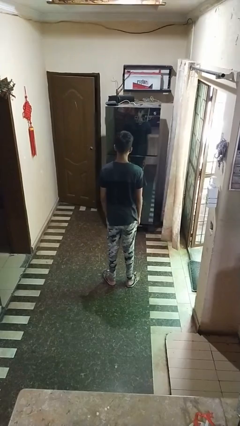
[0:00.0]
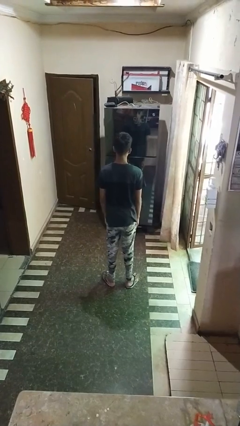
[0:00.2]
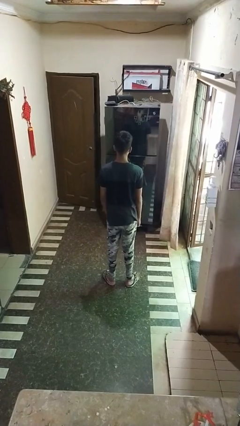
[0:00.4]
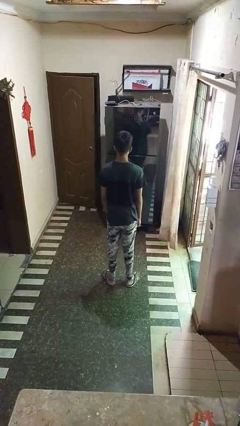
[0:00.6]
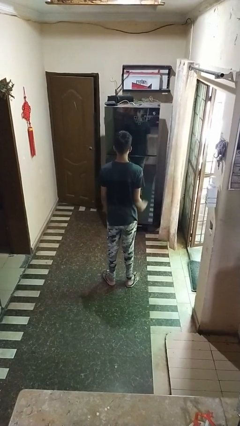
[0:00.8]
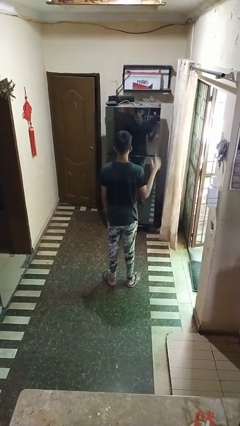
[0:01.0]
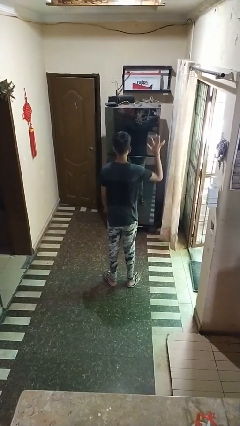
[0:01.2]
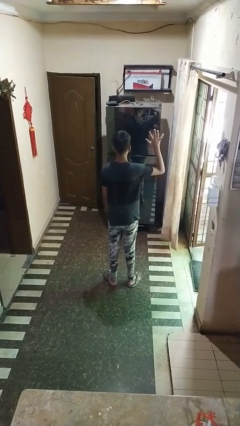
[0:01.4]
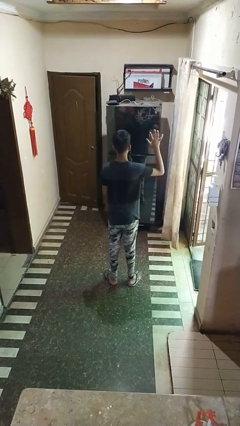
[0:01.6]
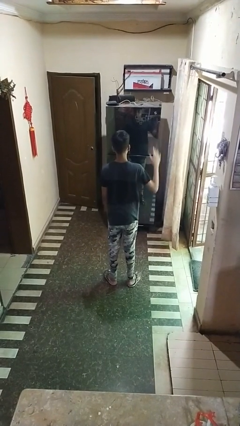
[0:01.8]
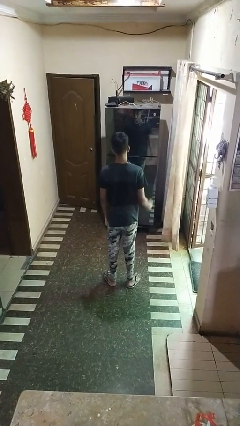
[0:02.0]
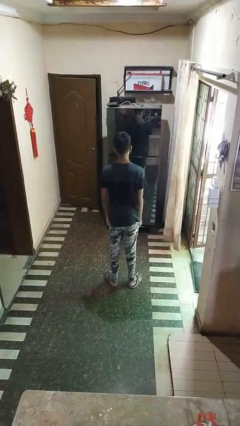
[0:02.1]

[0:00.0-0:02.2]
person gestures number five

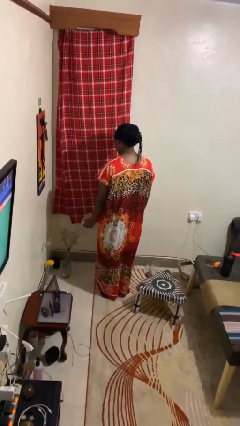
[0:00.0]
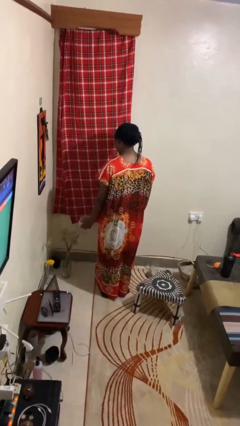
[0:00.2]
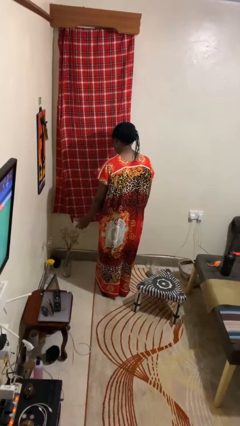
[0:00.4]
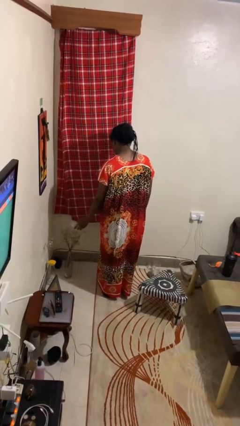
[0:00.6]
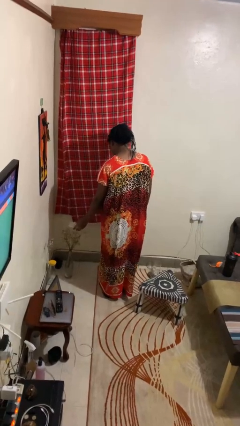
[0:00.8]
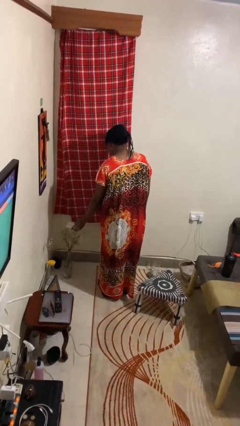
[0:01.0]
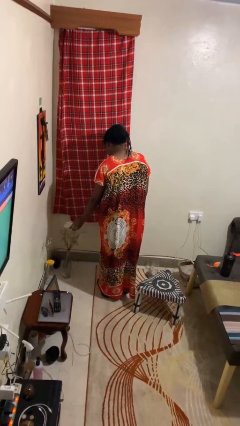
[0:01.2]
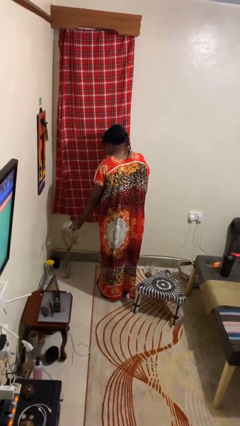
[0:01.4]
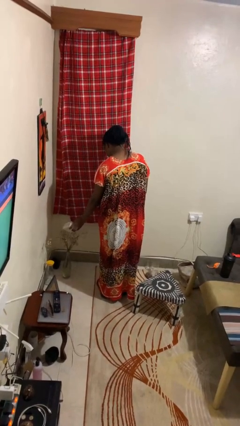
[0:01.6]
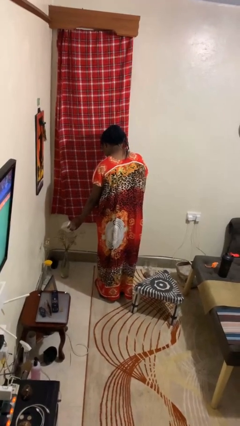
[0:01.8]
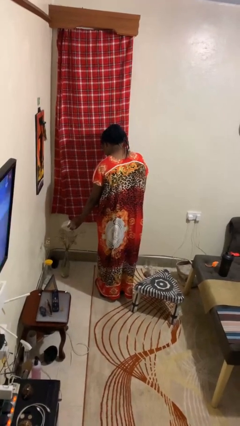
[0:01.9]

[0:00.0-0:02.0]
person waters houseplant

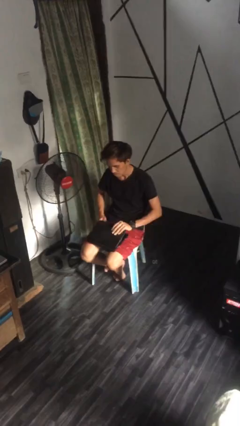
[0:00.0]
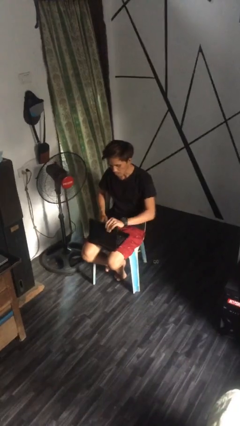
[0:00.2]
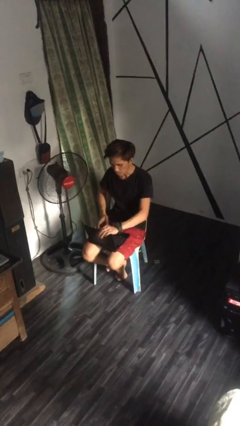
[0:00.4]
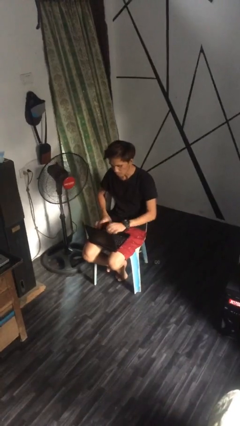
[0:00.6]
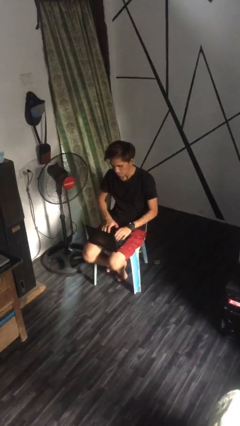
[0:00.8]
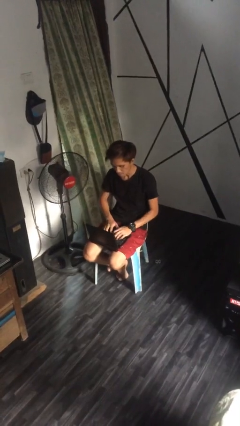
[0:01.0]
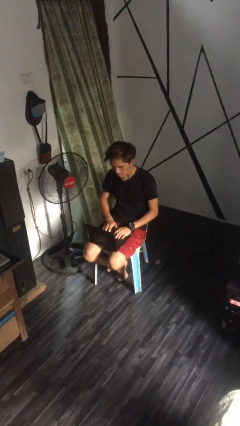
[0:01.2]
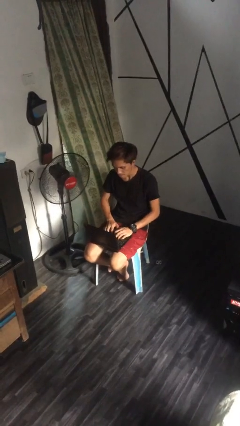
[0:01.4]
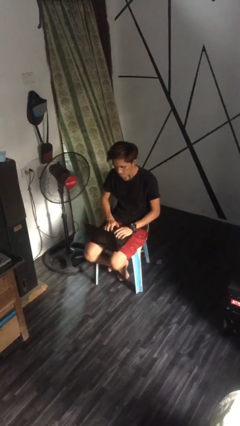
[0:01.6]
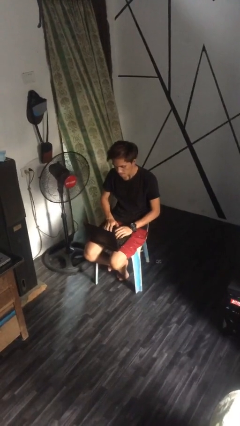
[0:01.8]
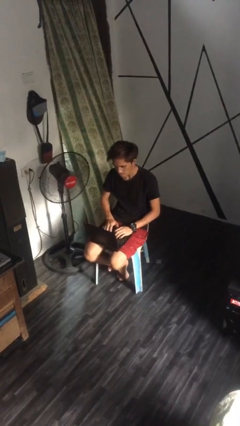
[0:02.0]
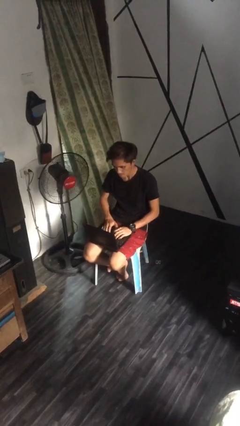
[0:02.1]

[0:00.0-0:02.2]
person interacts with laptop

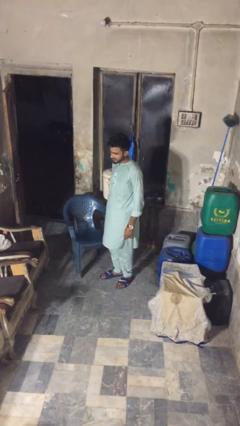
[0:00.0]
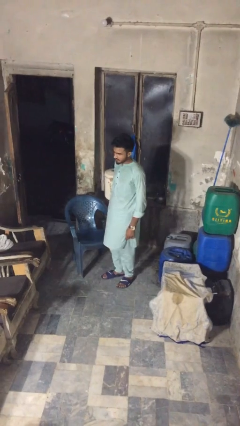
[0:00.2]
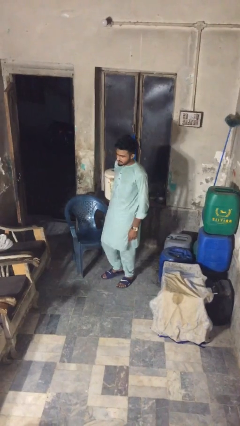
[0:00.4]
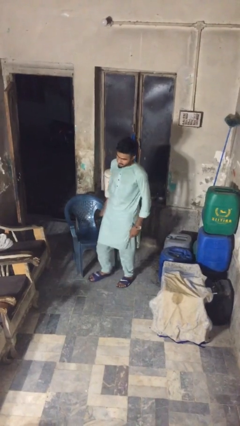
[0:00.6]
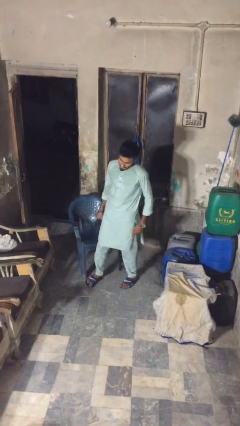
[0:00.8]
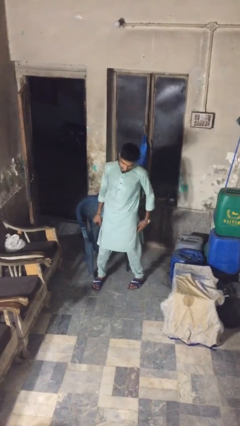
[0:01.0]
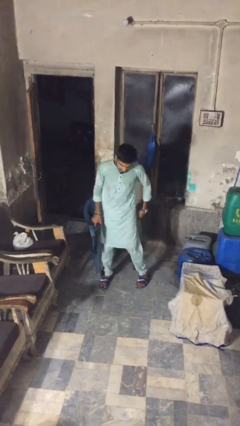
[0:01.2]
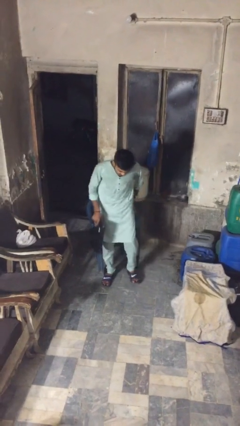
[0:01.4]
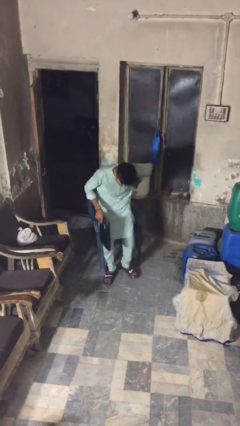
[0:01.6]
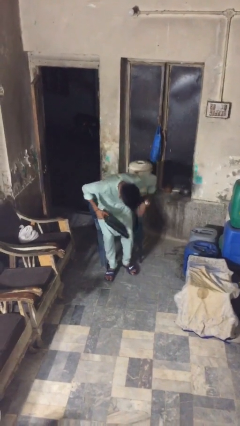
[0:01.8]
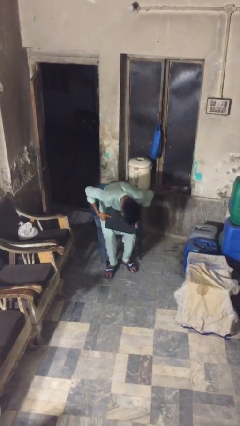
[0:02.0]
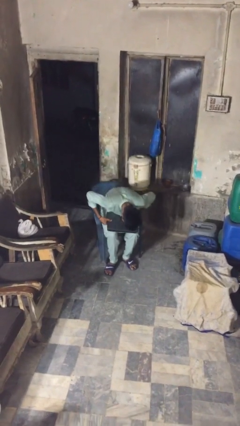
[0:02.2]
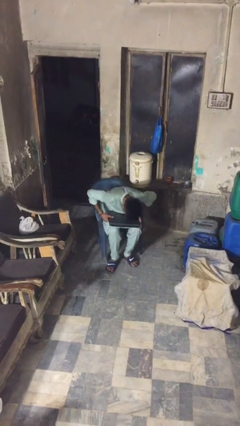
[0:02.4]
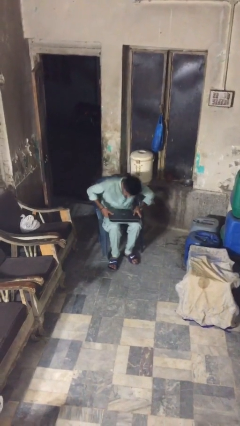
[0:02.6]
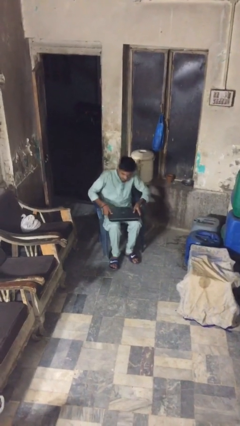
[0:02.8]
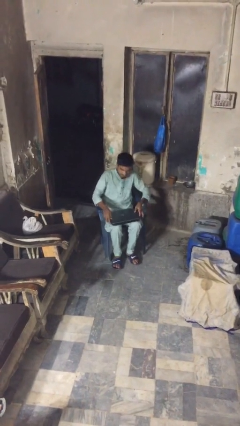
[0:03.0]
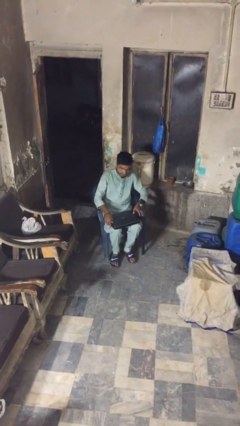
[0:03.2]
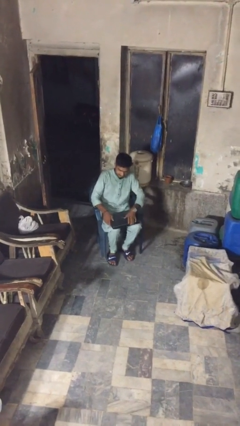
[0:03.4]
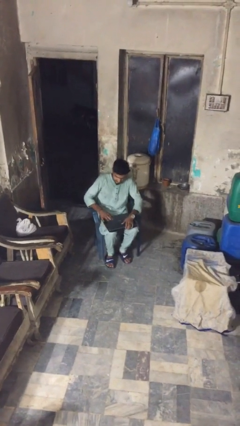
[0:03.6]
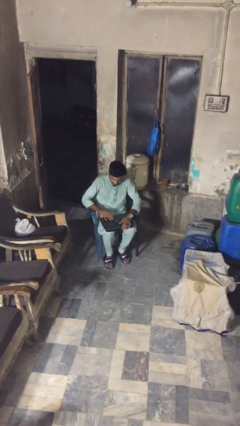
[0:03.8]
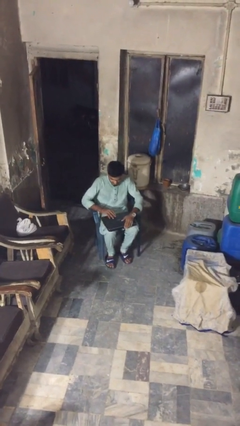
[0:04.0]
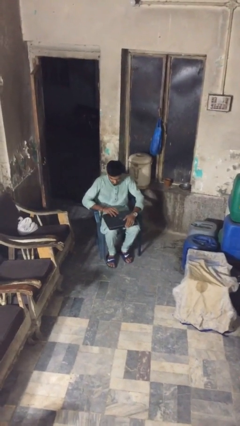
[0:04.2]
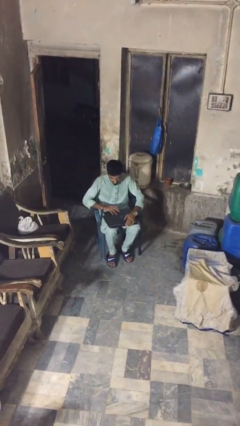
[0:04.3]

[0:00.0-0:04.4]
person sits down

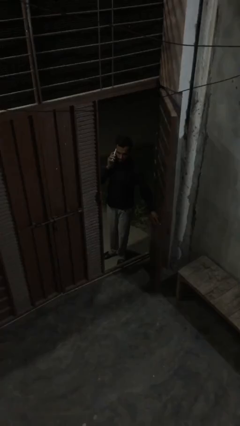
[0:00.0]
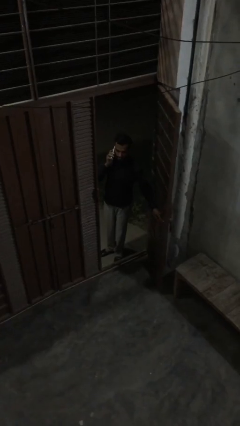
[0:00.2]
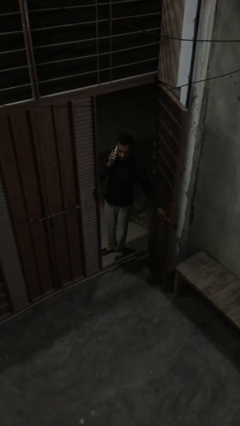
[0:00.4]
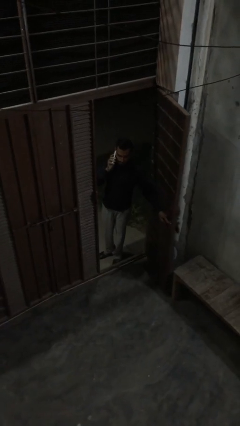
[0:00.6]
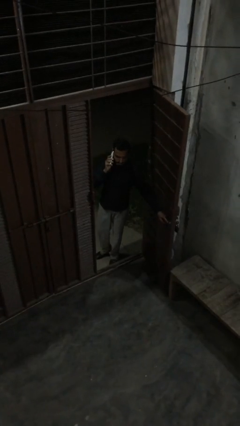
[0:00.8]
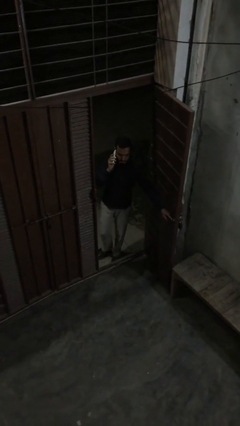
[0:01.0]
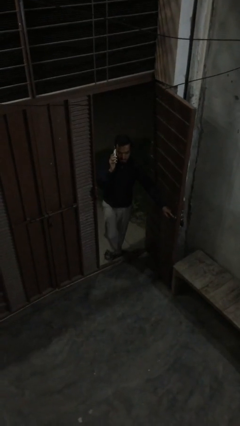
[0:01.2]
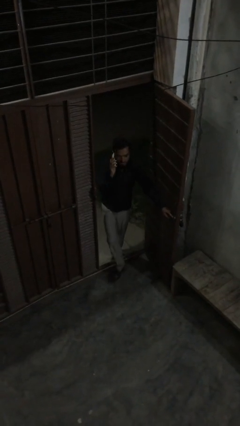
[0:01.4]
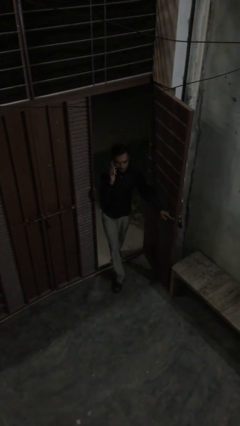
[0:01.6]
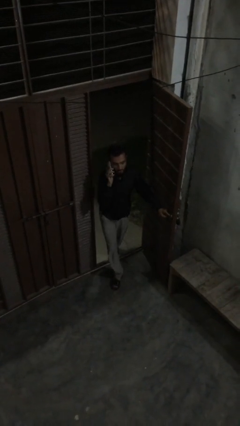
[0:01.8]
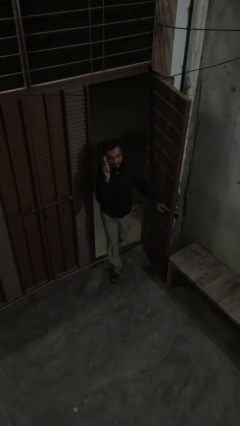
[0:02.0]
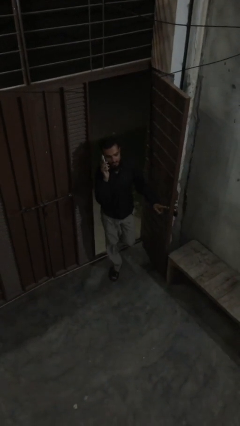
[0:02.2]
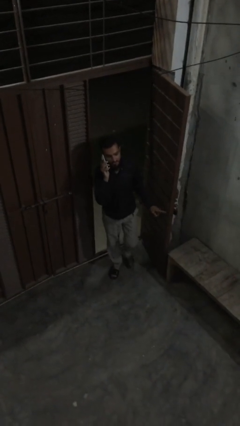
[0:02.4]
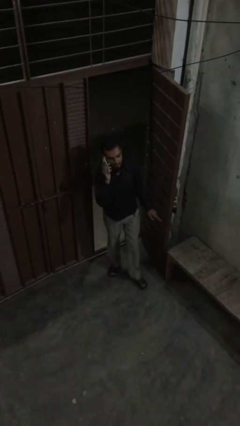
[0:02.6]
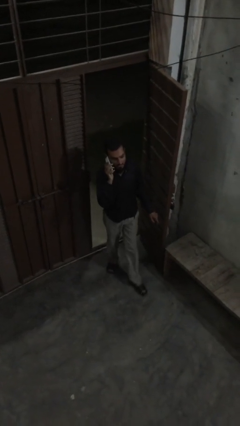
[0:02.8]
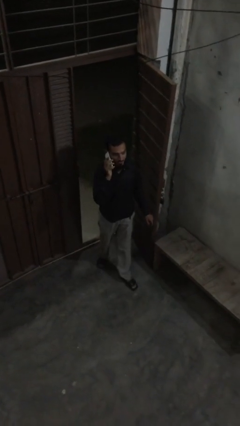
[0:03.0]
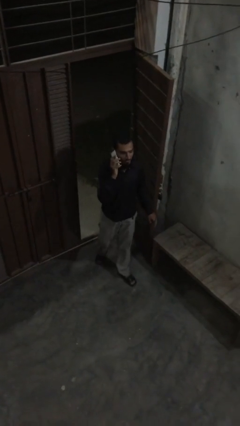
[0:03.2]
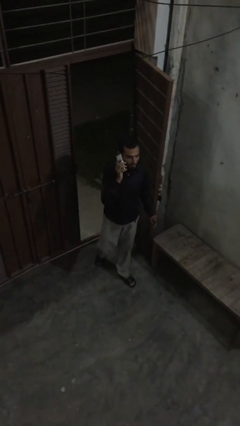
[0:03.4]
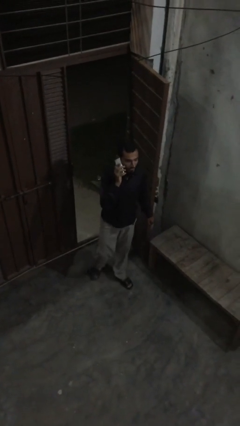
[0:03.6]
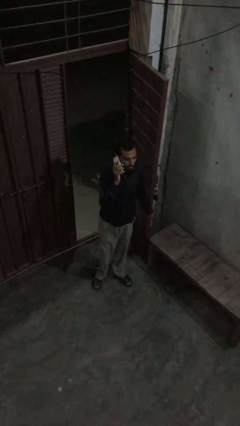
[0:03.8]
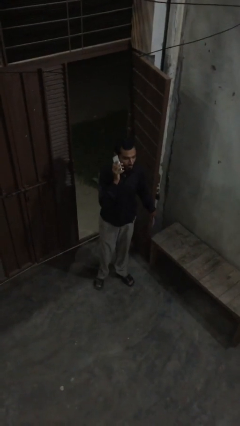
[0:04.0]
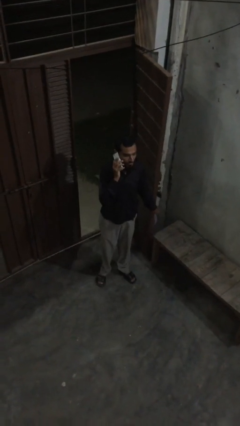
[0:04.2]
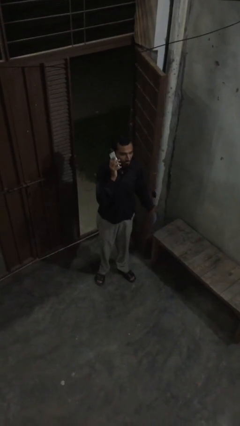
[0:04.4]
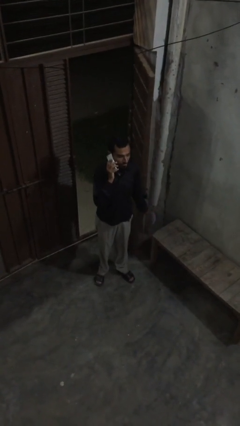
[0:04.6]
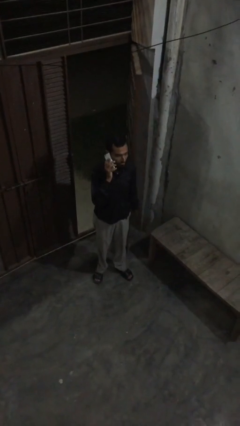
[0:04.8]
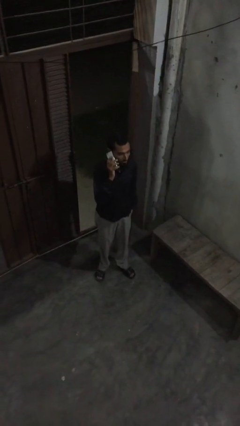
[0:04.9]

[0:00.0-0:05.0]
person enters scene through structure

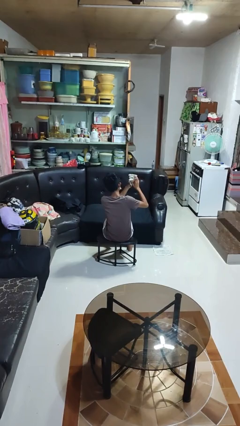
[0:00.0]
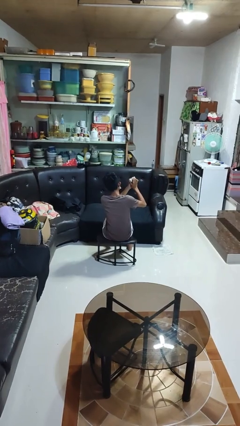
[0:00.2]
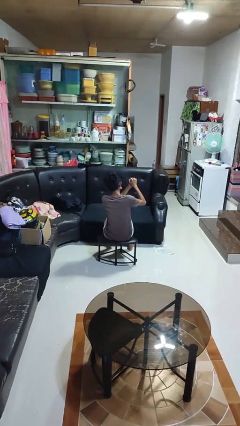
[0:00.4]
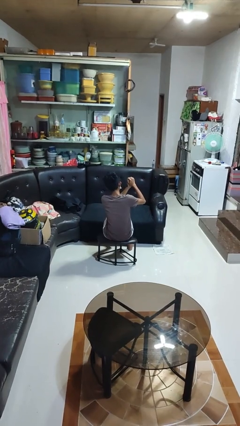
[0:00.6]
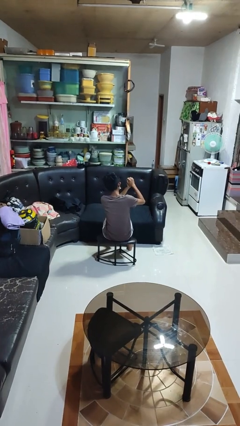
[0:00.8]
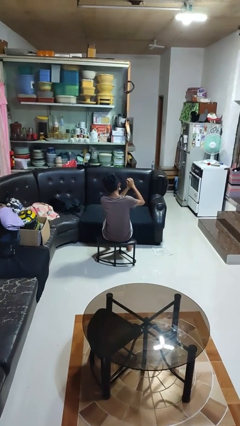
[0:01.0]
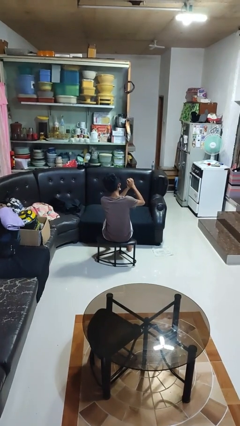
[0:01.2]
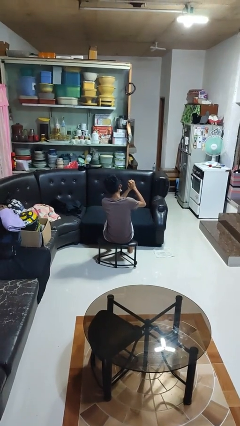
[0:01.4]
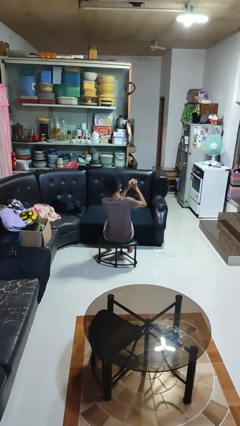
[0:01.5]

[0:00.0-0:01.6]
person crumples paper
